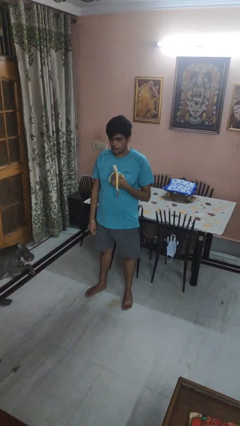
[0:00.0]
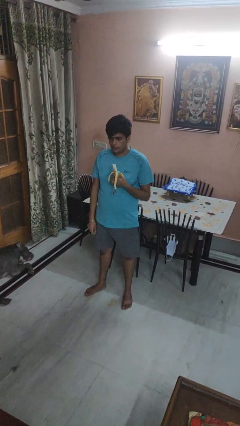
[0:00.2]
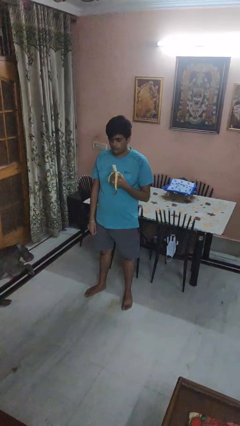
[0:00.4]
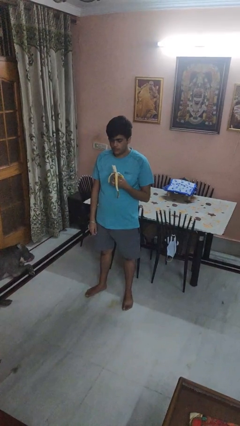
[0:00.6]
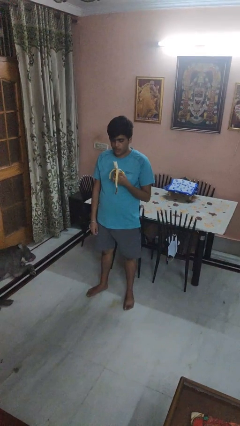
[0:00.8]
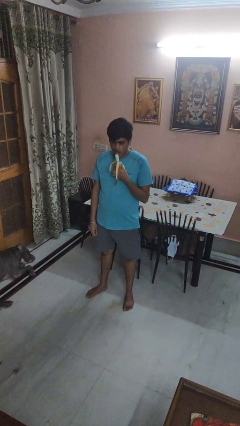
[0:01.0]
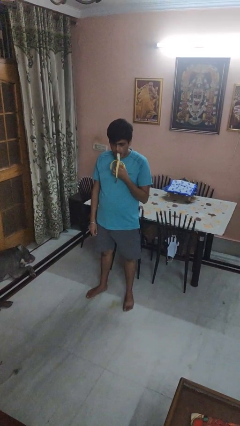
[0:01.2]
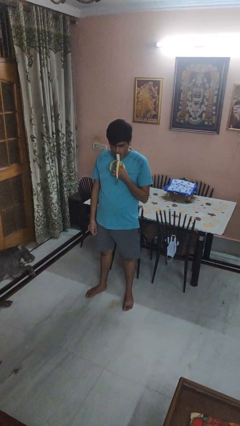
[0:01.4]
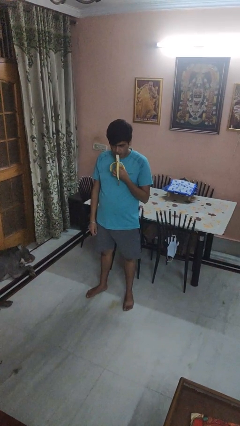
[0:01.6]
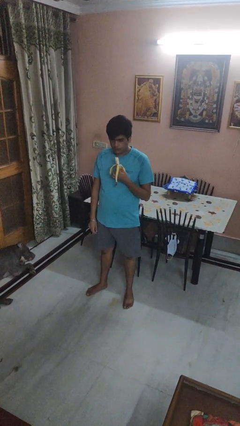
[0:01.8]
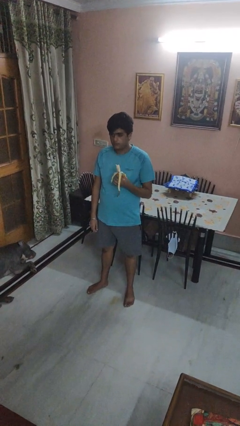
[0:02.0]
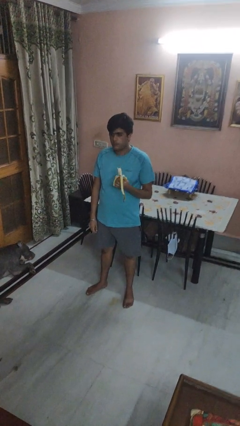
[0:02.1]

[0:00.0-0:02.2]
person eats banana

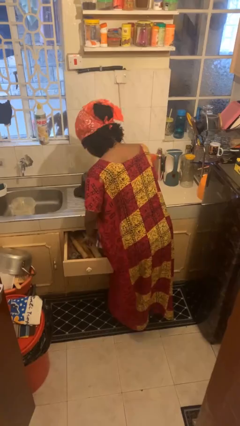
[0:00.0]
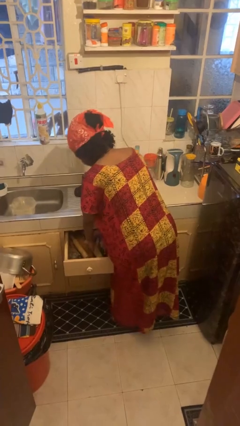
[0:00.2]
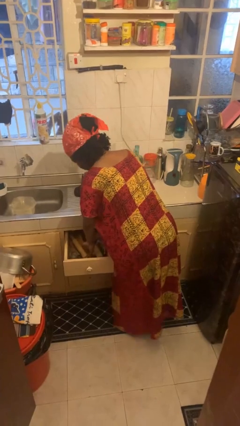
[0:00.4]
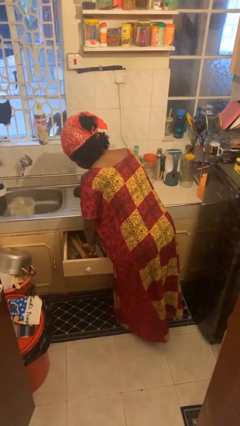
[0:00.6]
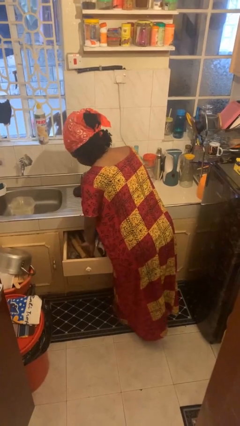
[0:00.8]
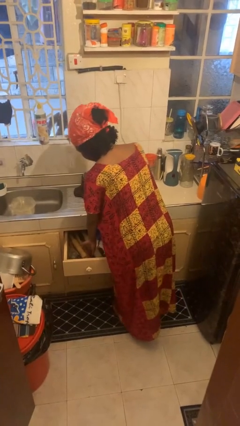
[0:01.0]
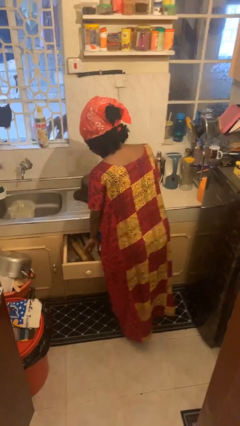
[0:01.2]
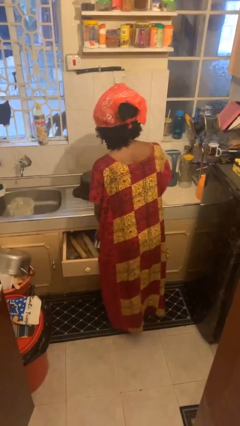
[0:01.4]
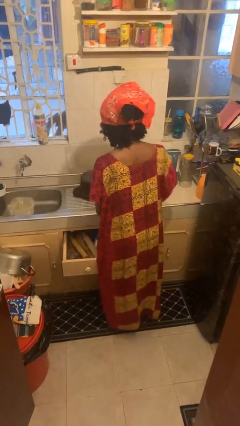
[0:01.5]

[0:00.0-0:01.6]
person searches in kitchen drawer

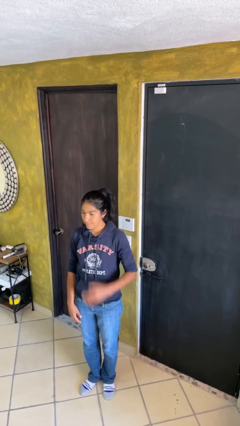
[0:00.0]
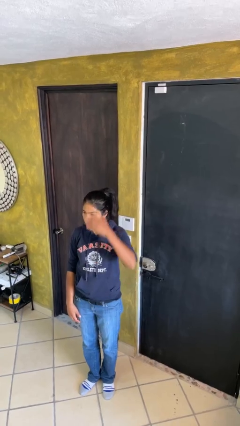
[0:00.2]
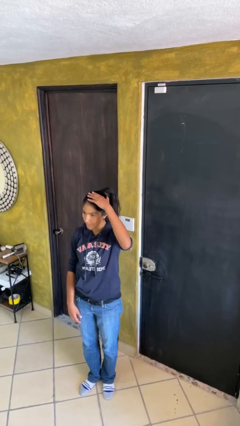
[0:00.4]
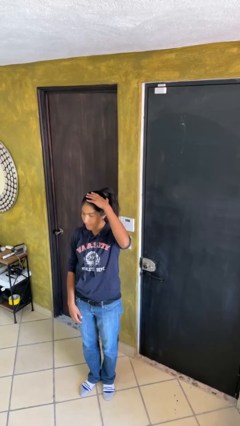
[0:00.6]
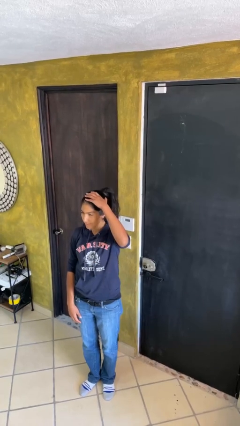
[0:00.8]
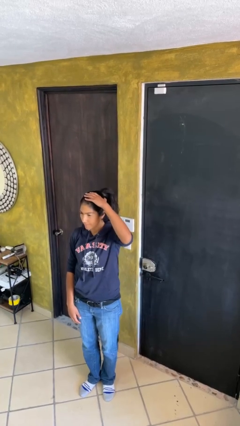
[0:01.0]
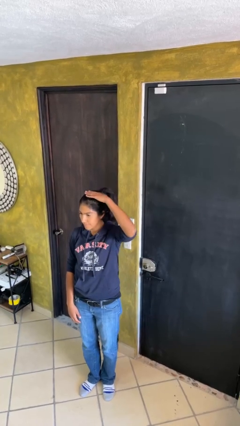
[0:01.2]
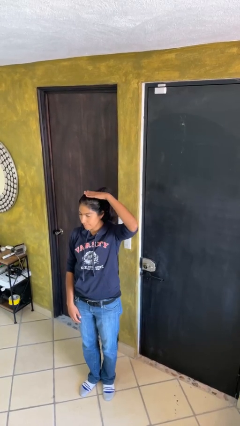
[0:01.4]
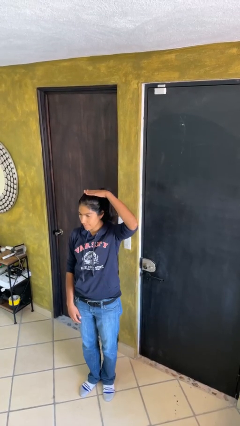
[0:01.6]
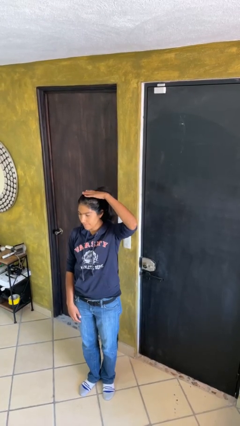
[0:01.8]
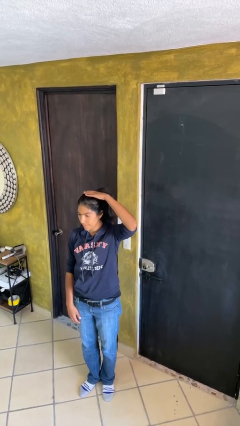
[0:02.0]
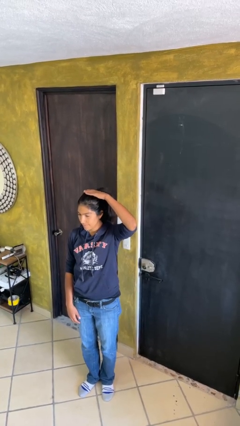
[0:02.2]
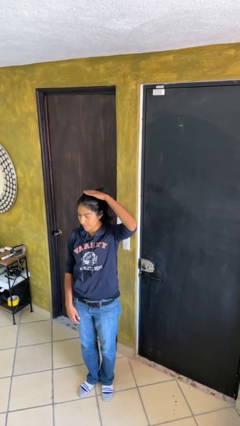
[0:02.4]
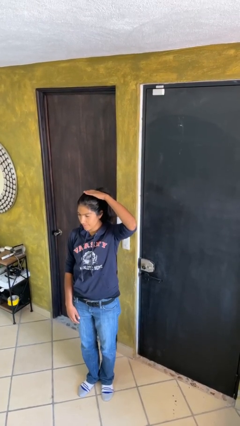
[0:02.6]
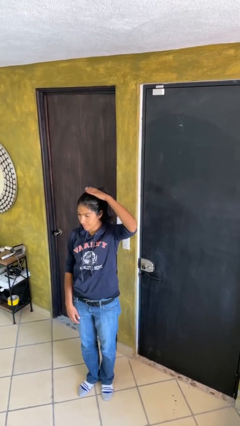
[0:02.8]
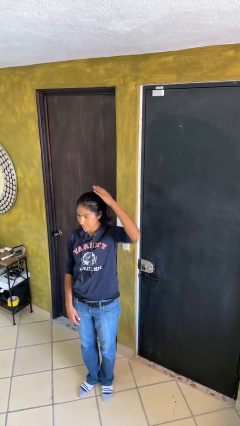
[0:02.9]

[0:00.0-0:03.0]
person pats head

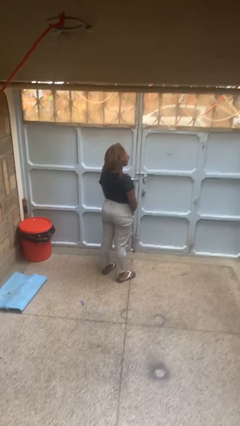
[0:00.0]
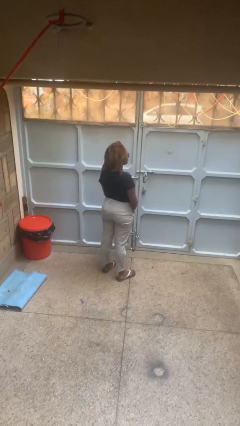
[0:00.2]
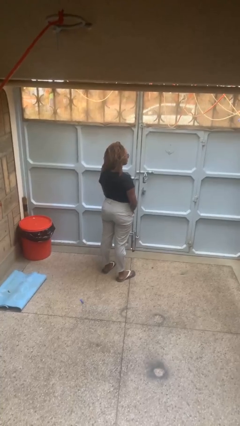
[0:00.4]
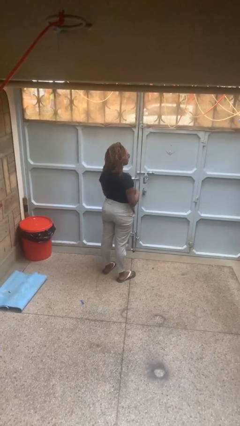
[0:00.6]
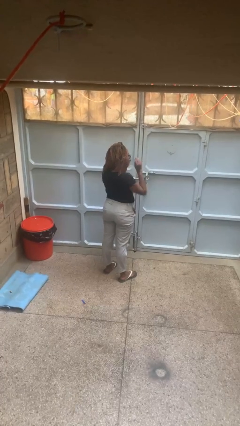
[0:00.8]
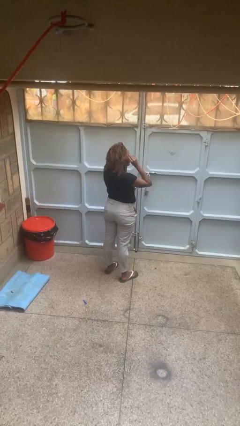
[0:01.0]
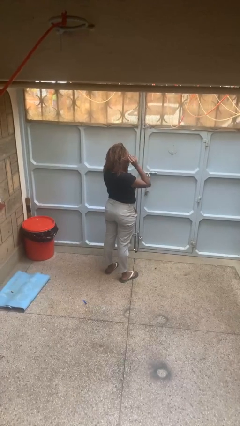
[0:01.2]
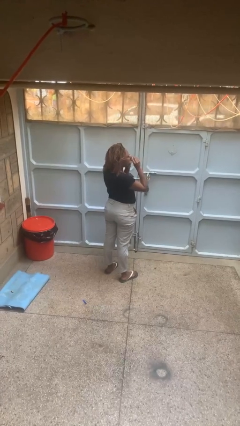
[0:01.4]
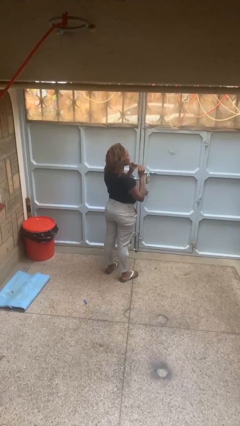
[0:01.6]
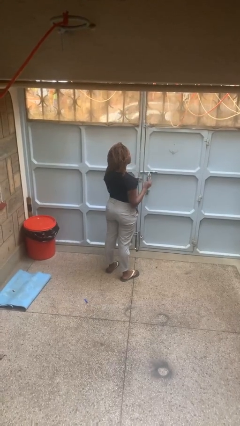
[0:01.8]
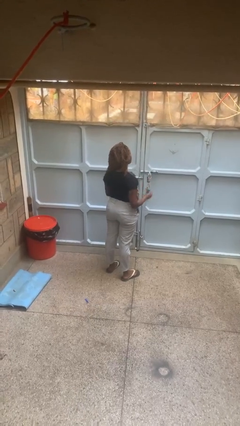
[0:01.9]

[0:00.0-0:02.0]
person takes off glasses

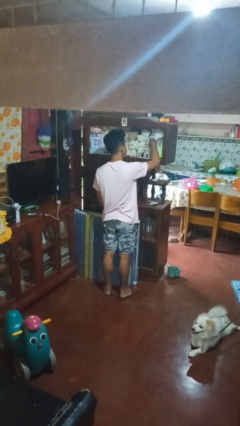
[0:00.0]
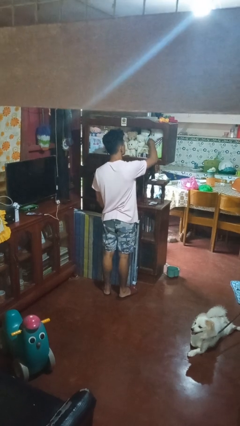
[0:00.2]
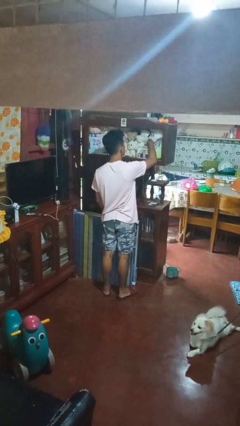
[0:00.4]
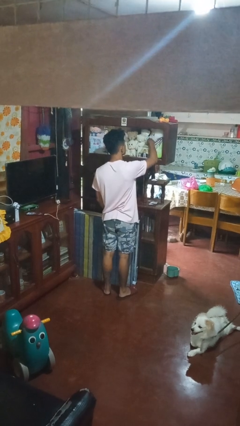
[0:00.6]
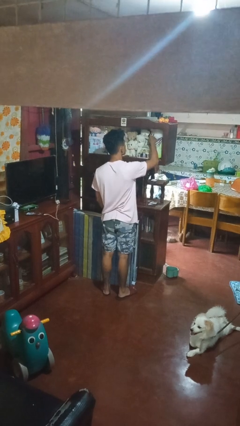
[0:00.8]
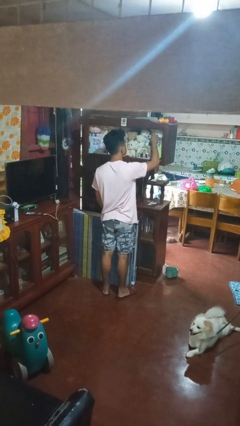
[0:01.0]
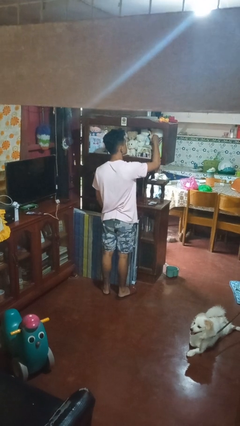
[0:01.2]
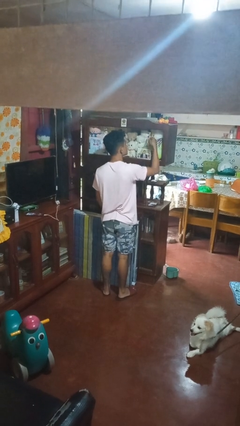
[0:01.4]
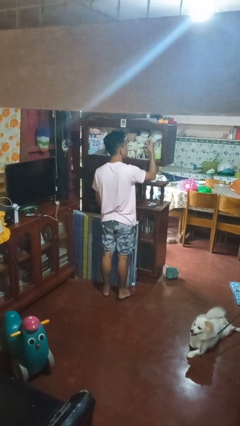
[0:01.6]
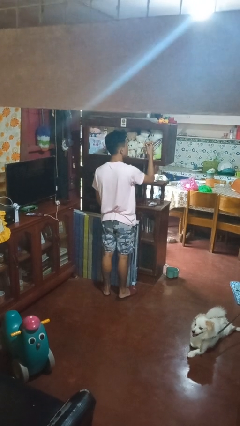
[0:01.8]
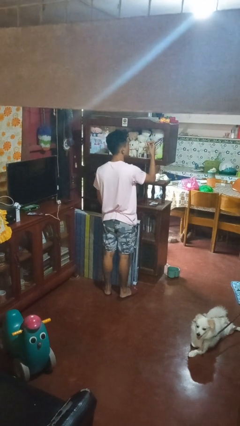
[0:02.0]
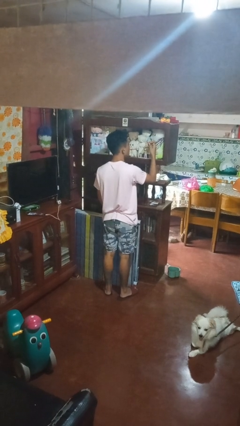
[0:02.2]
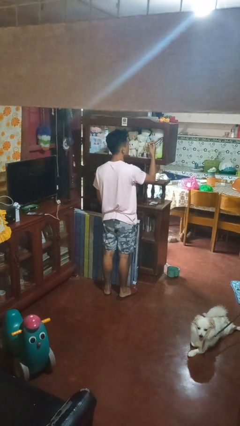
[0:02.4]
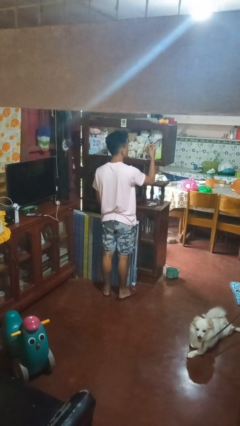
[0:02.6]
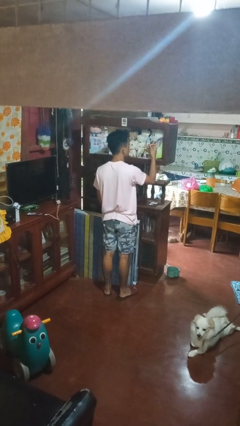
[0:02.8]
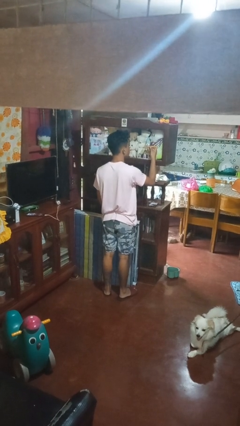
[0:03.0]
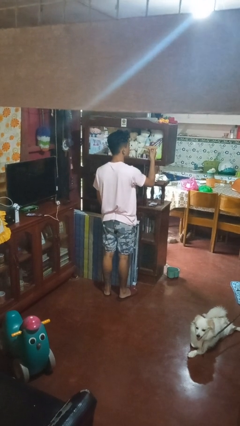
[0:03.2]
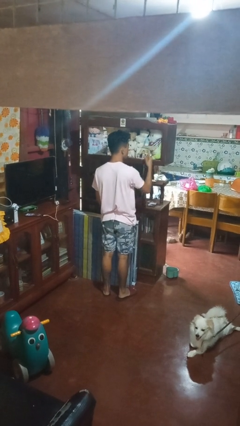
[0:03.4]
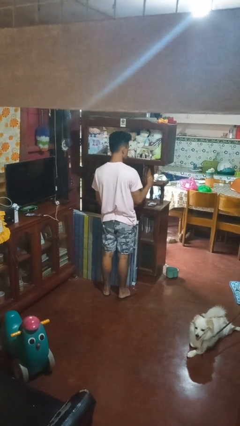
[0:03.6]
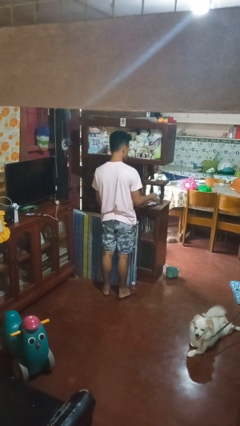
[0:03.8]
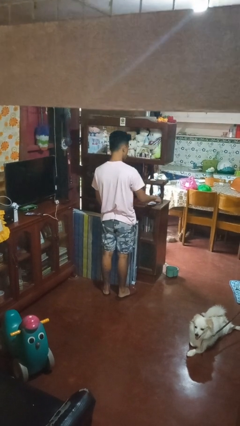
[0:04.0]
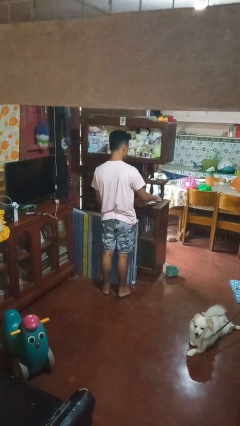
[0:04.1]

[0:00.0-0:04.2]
person picks up object from shelf

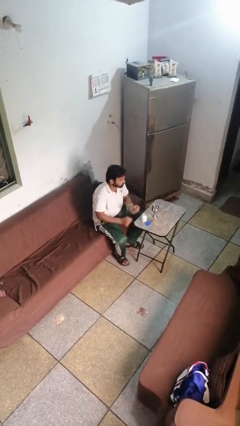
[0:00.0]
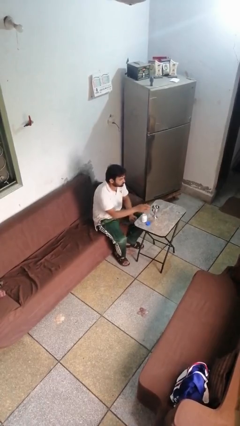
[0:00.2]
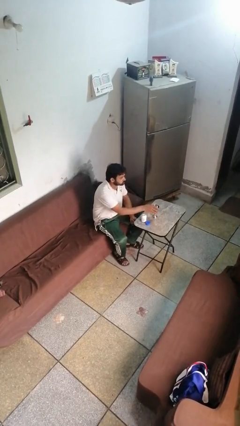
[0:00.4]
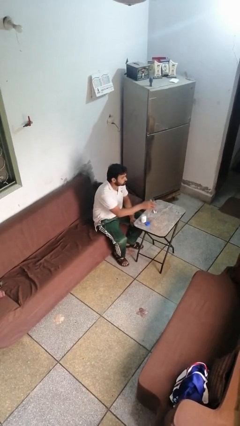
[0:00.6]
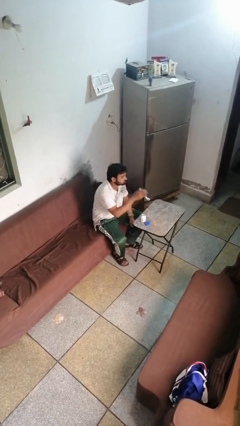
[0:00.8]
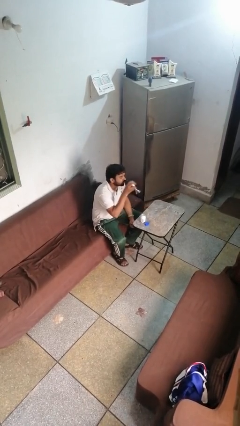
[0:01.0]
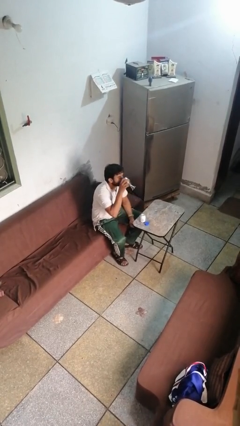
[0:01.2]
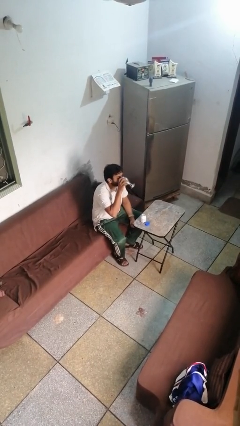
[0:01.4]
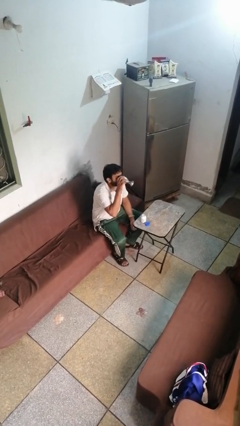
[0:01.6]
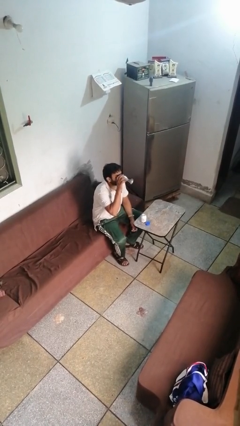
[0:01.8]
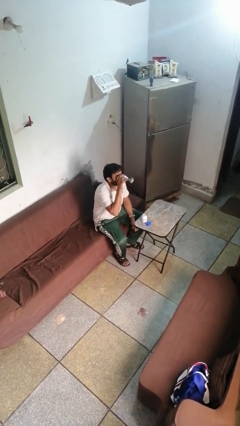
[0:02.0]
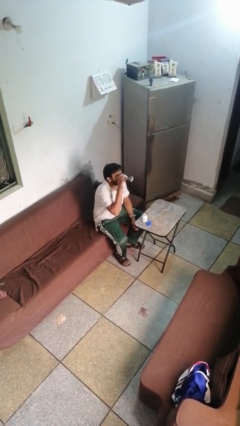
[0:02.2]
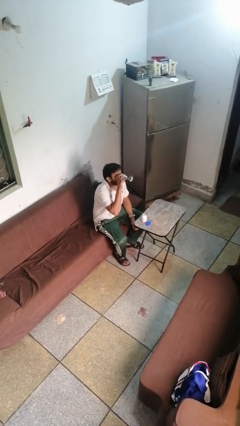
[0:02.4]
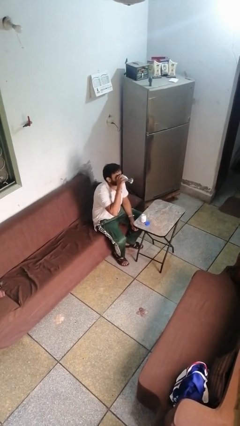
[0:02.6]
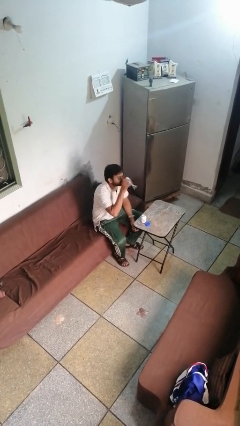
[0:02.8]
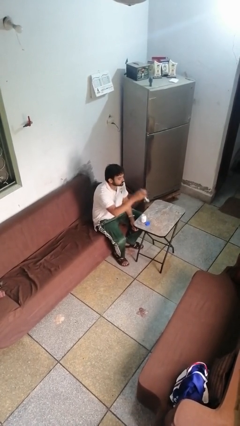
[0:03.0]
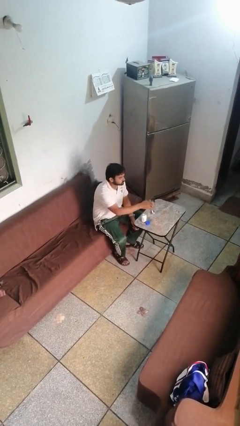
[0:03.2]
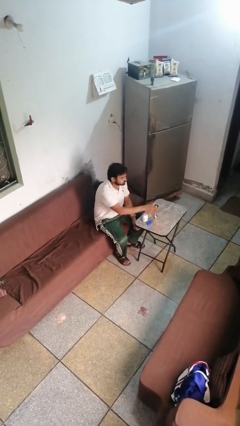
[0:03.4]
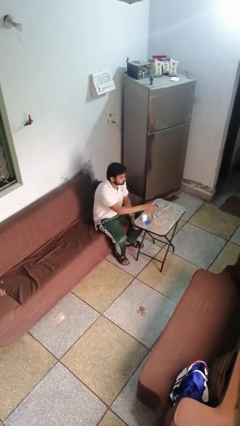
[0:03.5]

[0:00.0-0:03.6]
person drinks from cup

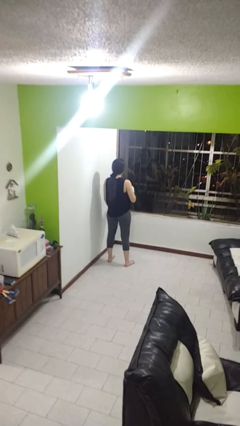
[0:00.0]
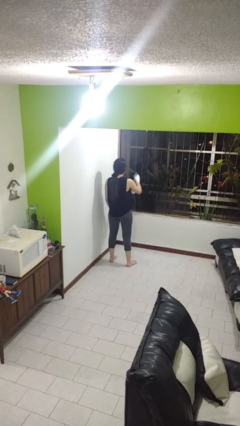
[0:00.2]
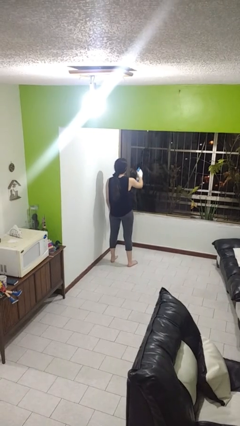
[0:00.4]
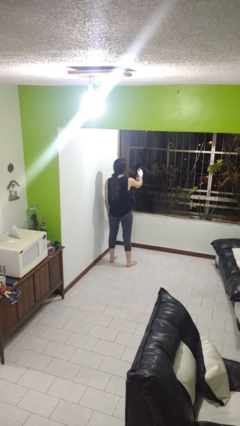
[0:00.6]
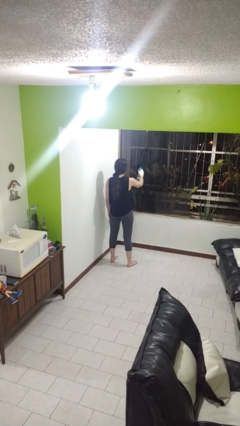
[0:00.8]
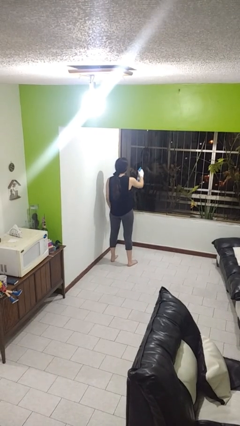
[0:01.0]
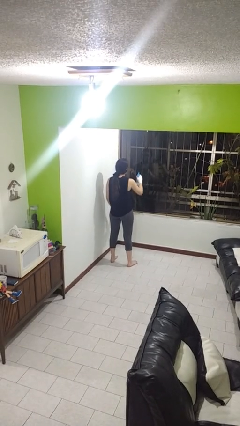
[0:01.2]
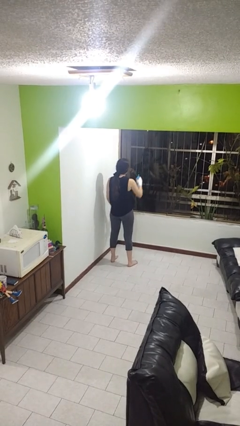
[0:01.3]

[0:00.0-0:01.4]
person sprays from bottle
